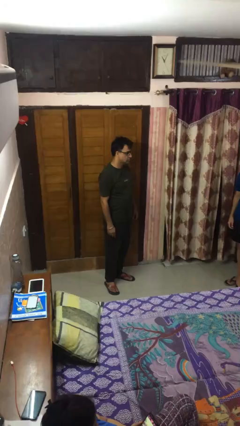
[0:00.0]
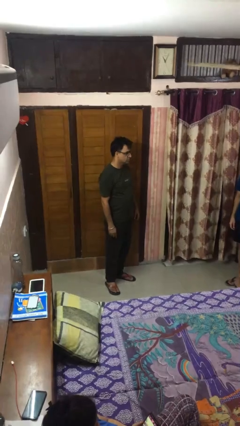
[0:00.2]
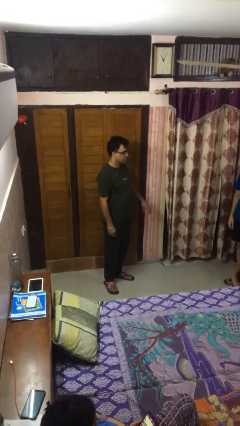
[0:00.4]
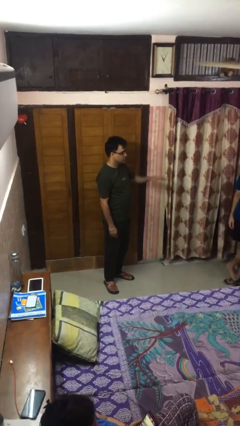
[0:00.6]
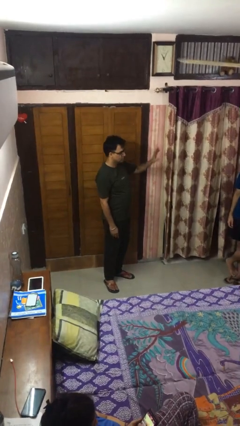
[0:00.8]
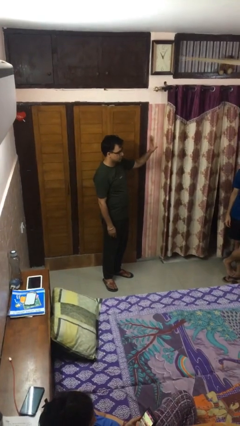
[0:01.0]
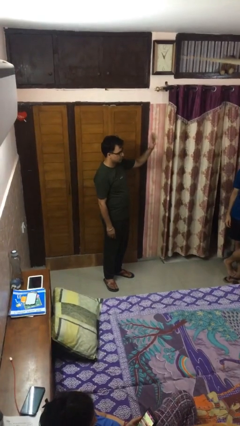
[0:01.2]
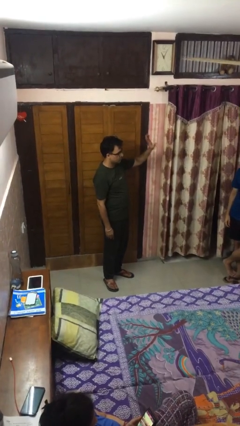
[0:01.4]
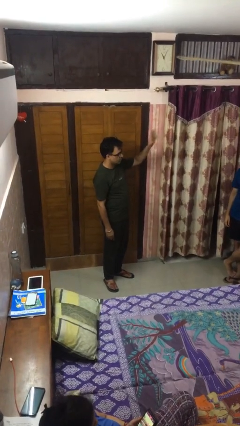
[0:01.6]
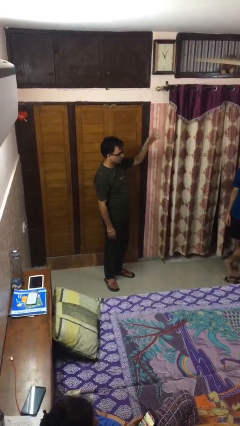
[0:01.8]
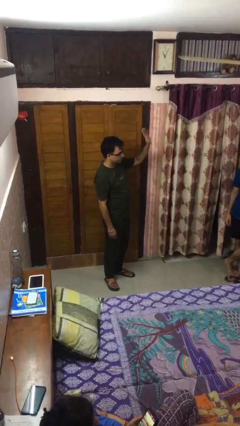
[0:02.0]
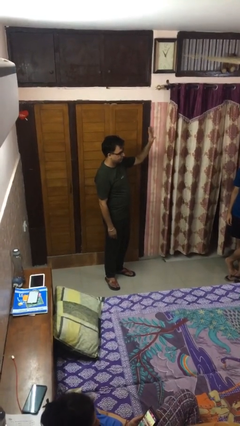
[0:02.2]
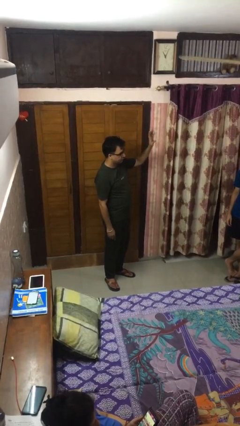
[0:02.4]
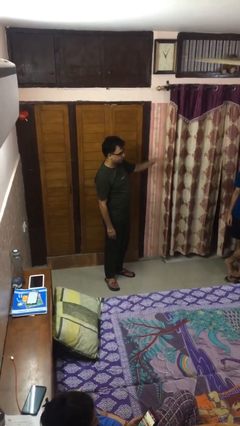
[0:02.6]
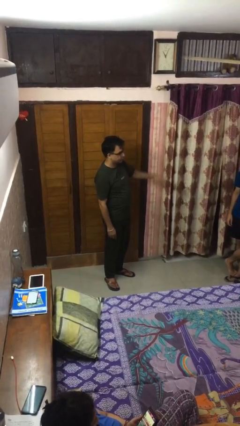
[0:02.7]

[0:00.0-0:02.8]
person waves at person

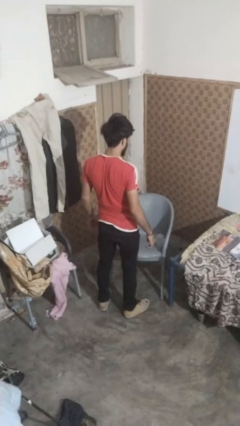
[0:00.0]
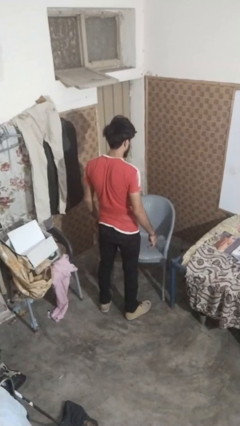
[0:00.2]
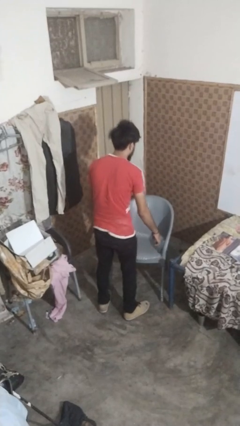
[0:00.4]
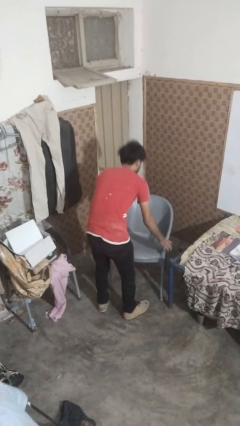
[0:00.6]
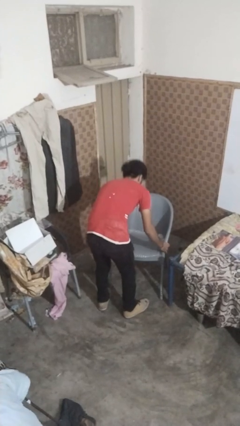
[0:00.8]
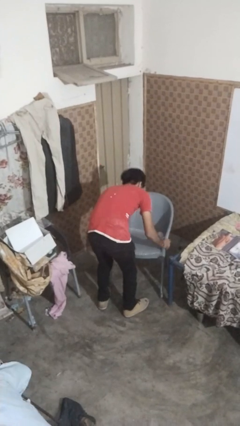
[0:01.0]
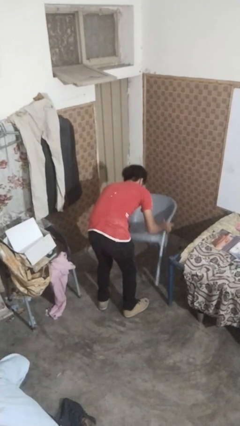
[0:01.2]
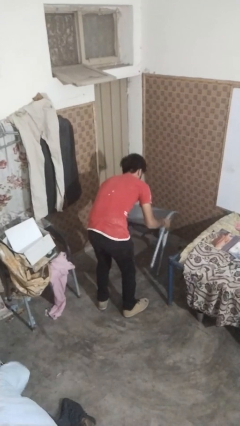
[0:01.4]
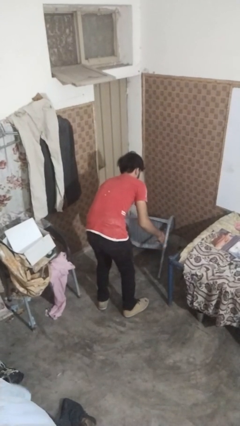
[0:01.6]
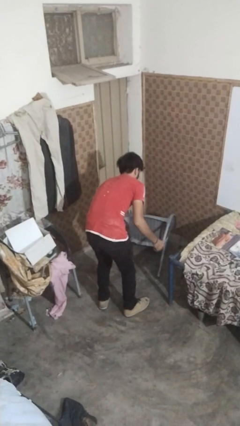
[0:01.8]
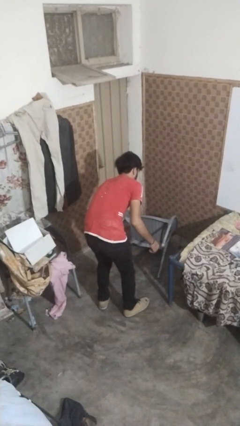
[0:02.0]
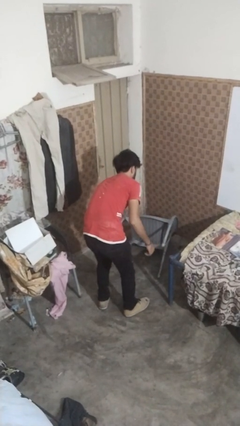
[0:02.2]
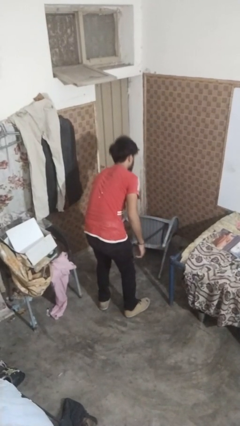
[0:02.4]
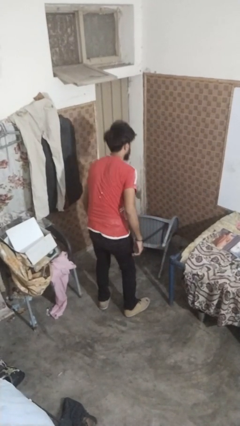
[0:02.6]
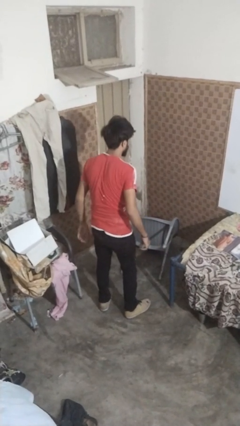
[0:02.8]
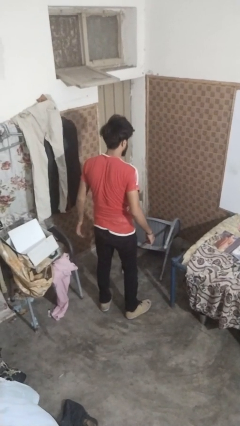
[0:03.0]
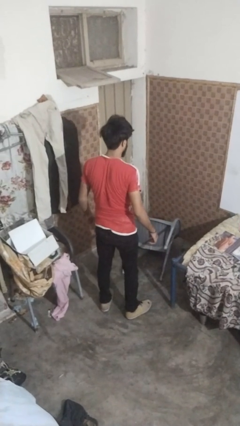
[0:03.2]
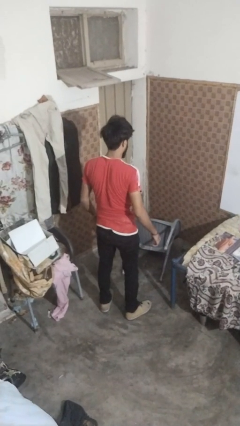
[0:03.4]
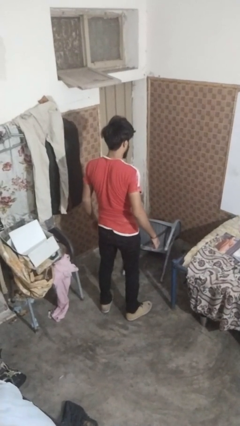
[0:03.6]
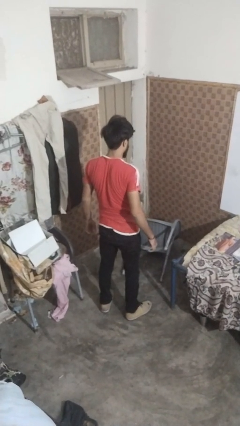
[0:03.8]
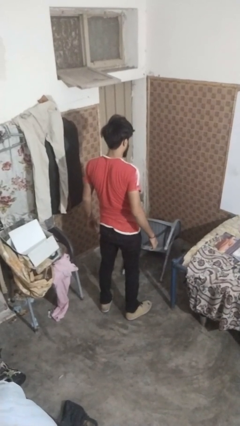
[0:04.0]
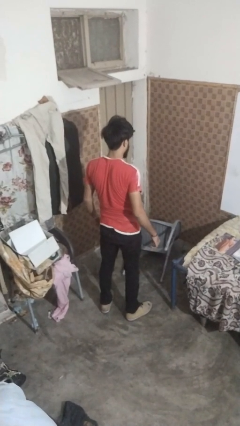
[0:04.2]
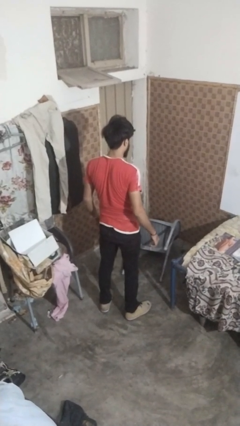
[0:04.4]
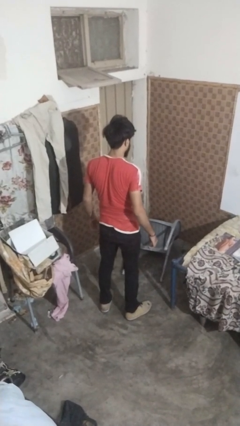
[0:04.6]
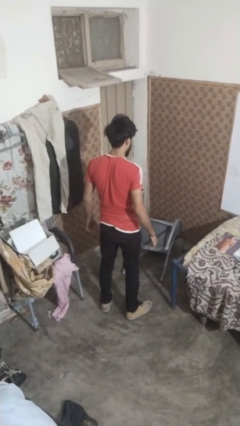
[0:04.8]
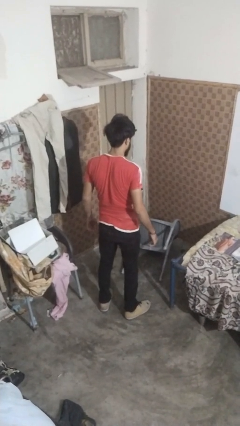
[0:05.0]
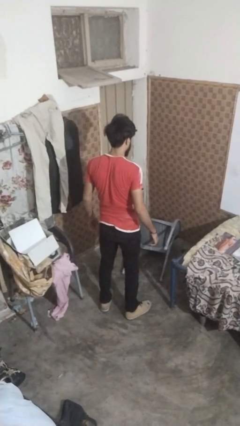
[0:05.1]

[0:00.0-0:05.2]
person knocks over furniture

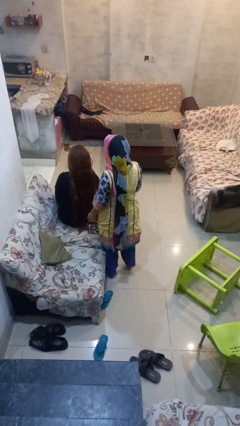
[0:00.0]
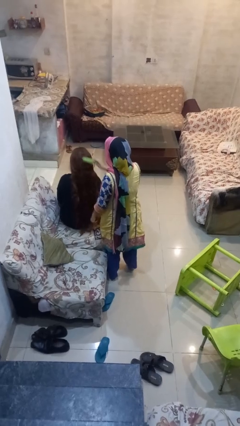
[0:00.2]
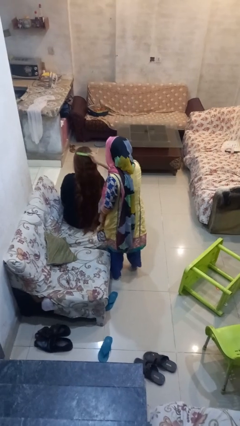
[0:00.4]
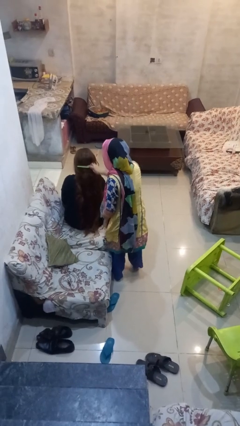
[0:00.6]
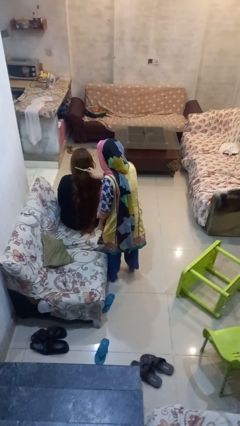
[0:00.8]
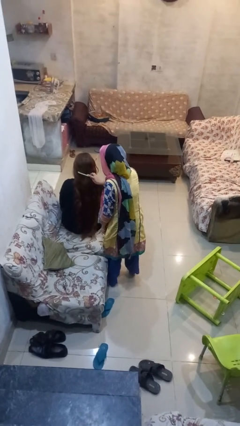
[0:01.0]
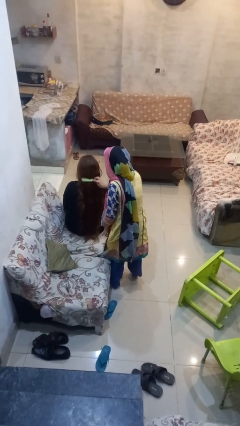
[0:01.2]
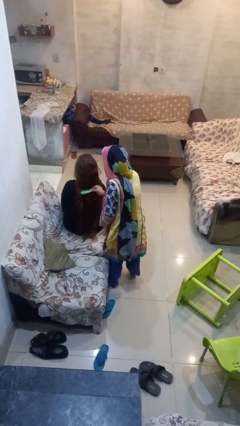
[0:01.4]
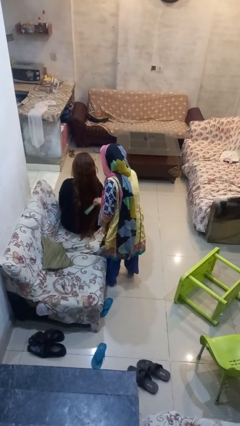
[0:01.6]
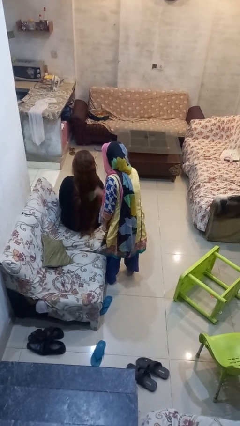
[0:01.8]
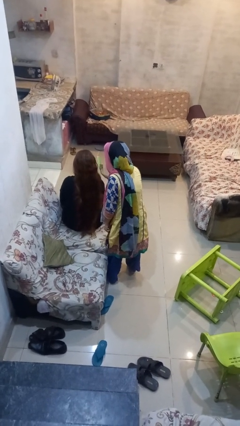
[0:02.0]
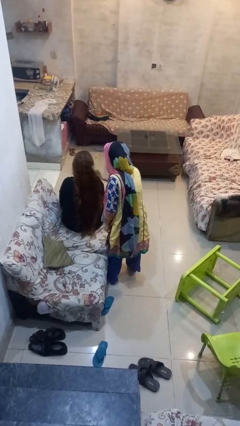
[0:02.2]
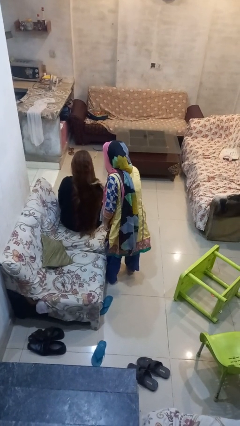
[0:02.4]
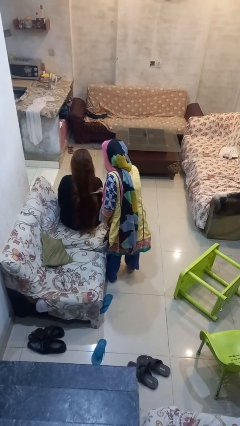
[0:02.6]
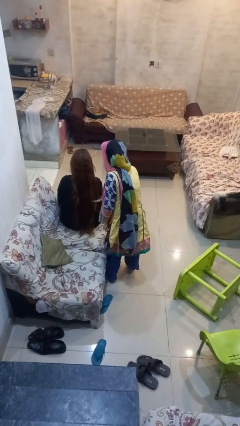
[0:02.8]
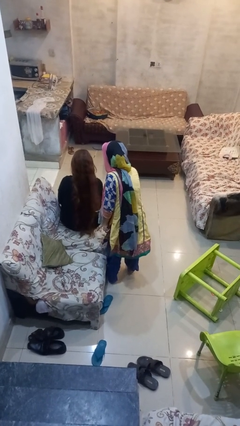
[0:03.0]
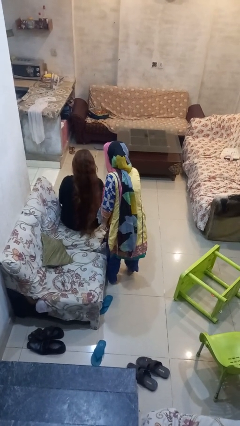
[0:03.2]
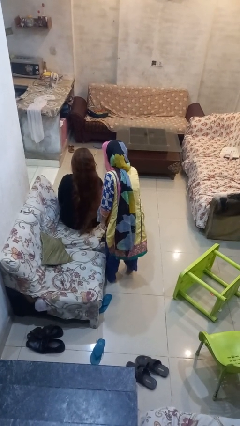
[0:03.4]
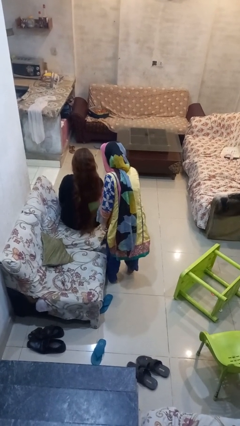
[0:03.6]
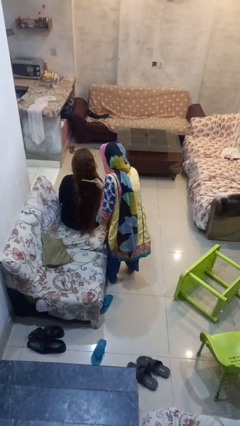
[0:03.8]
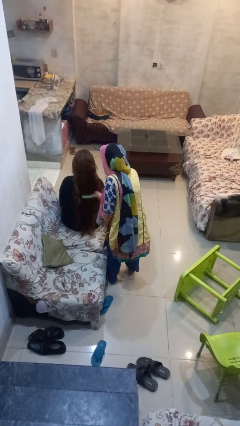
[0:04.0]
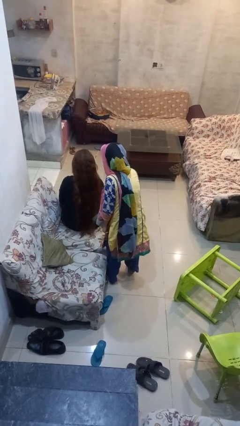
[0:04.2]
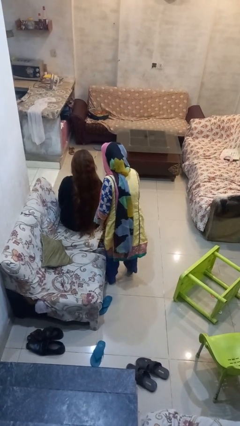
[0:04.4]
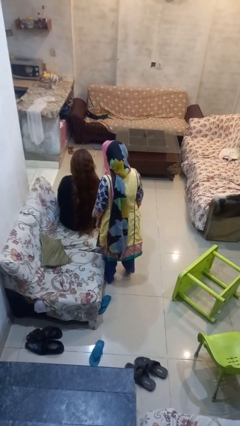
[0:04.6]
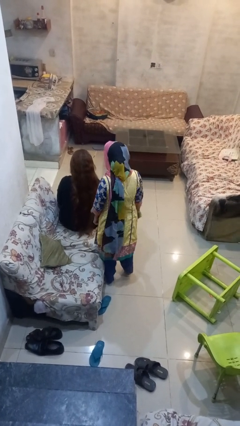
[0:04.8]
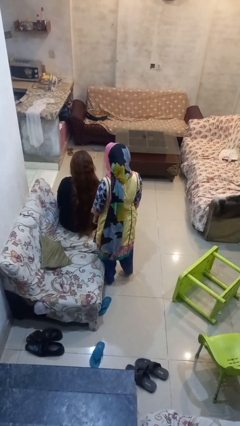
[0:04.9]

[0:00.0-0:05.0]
person brushes hair of person

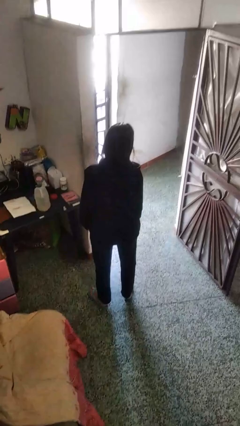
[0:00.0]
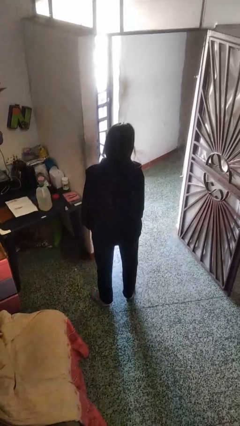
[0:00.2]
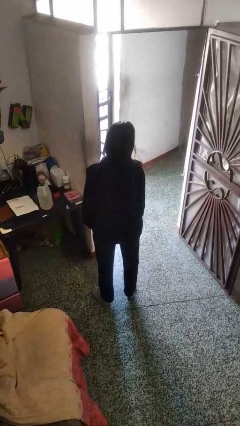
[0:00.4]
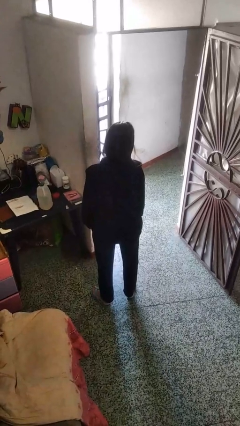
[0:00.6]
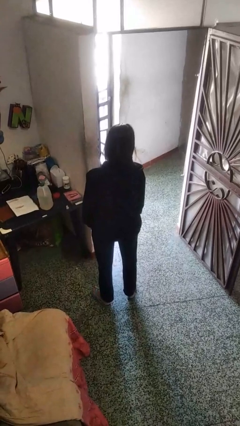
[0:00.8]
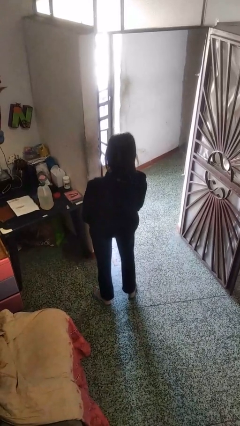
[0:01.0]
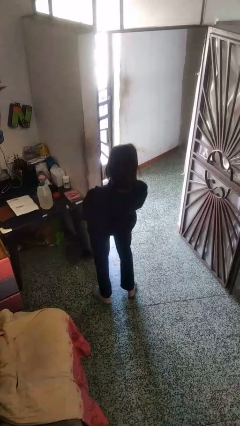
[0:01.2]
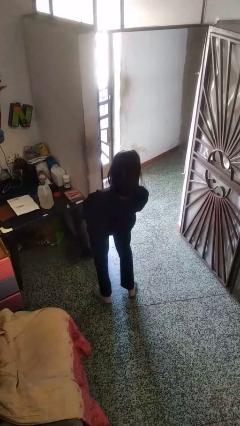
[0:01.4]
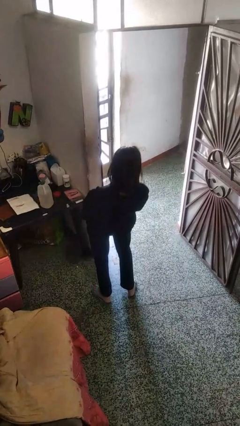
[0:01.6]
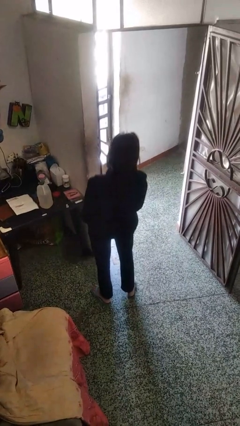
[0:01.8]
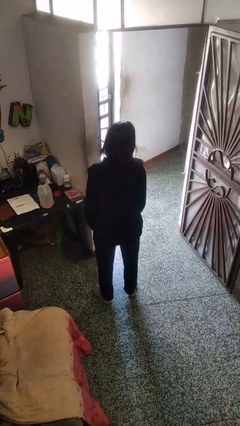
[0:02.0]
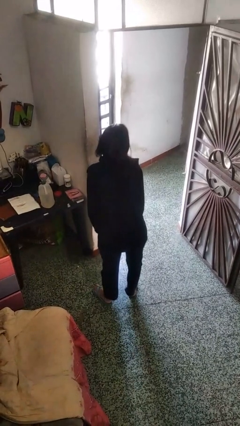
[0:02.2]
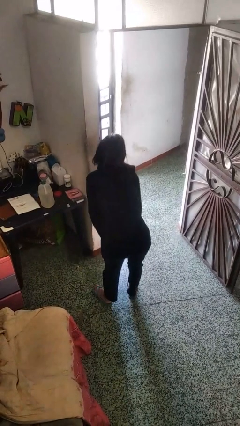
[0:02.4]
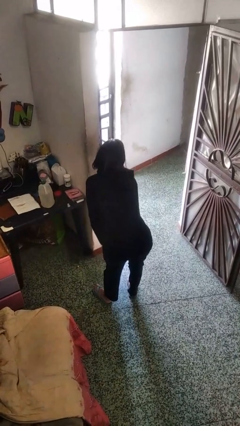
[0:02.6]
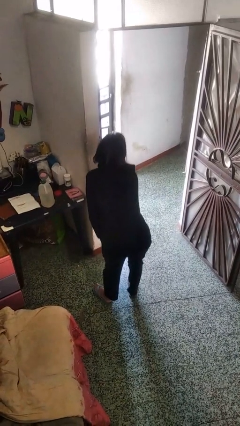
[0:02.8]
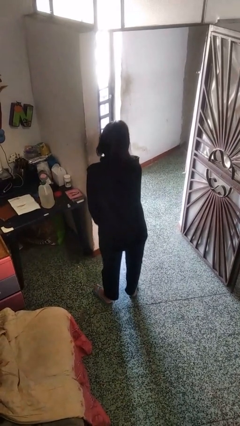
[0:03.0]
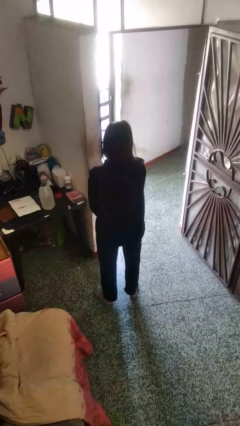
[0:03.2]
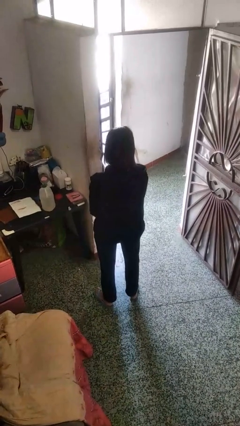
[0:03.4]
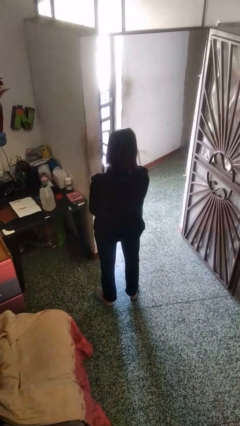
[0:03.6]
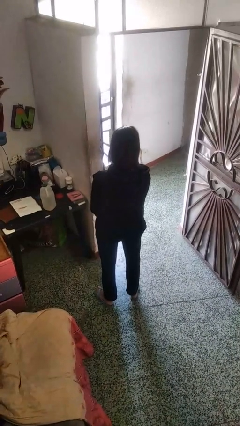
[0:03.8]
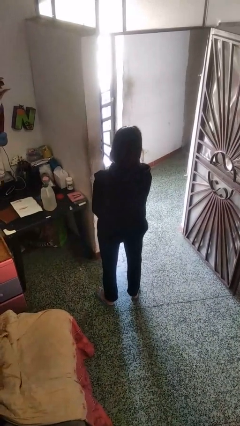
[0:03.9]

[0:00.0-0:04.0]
person wiggles hips

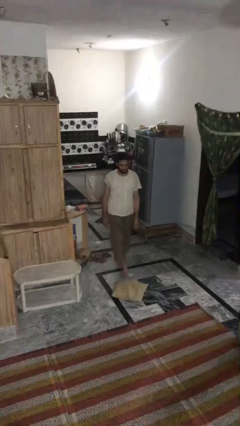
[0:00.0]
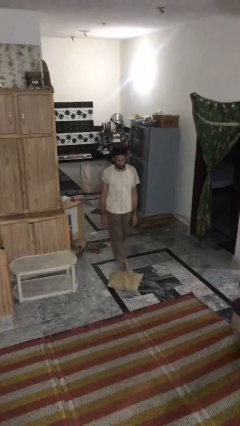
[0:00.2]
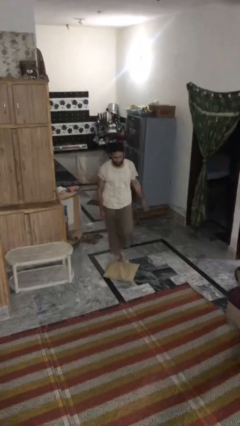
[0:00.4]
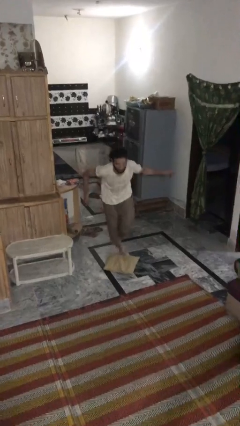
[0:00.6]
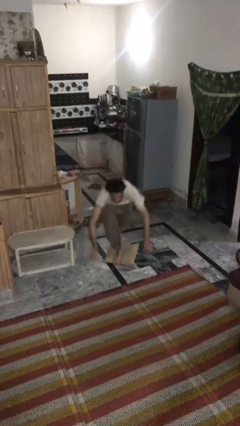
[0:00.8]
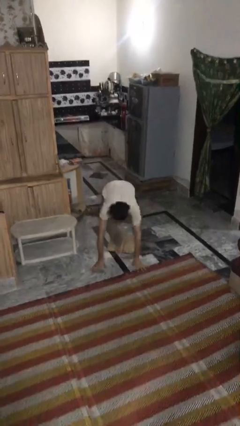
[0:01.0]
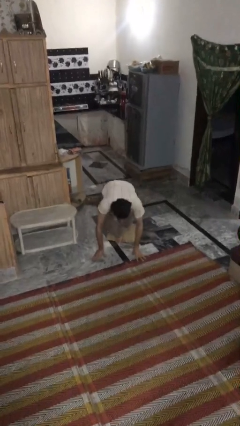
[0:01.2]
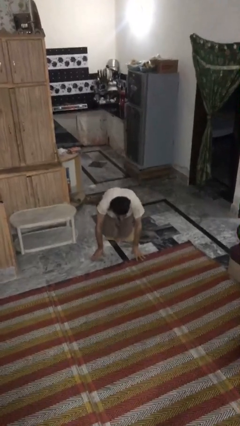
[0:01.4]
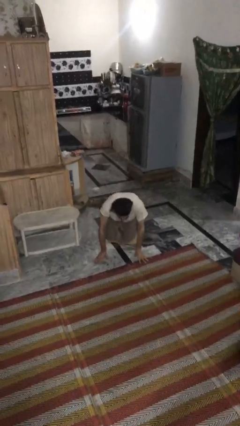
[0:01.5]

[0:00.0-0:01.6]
person trips on object on floor
